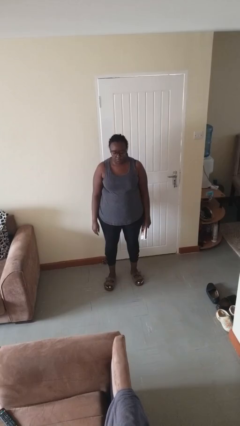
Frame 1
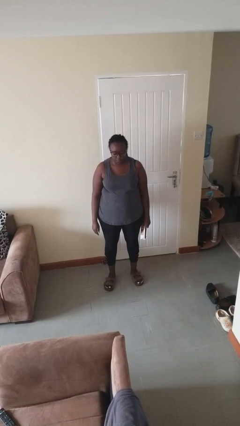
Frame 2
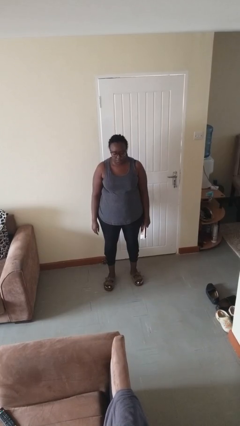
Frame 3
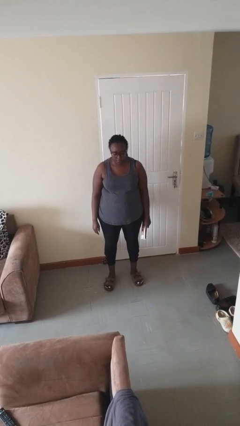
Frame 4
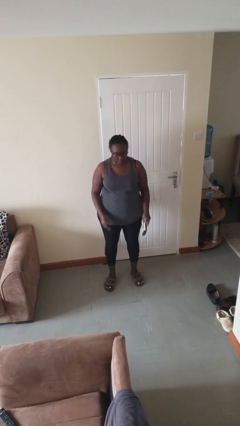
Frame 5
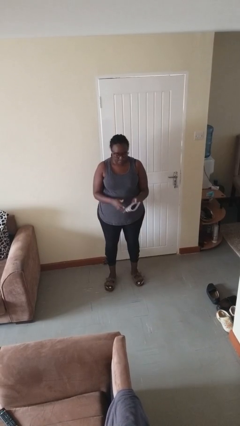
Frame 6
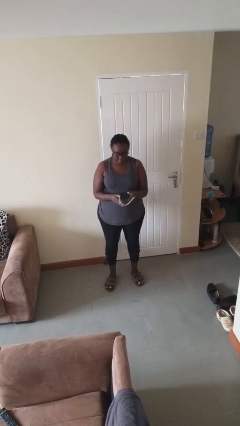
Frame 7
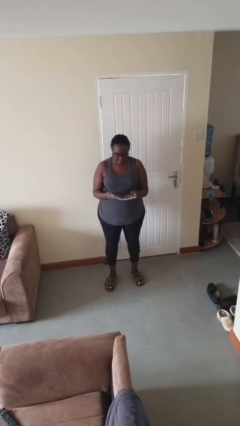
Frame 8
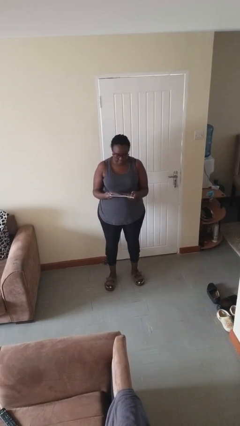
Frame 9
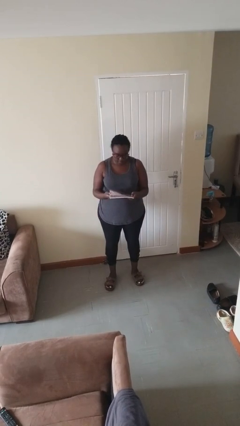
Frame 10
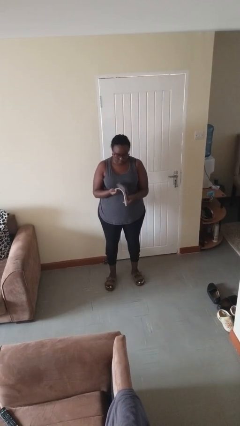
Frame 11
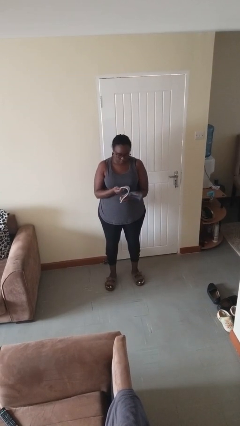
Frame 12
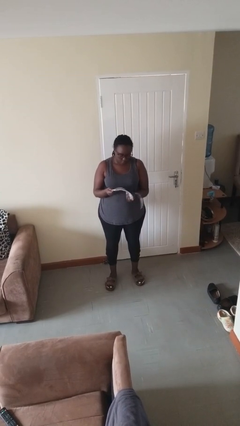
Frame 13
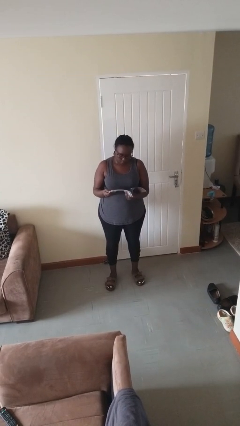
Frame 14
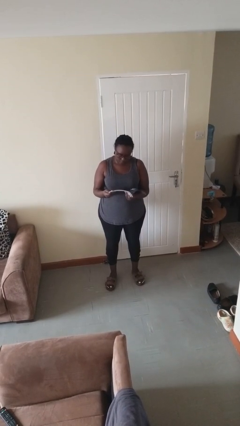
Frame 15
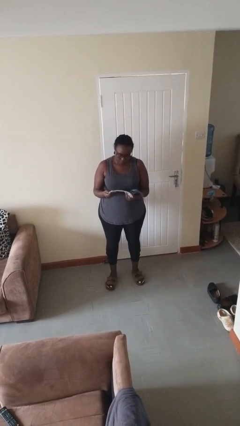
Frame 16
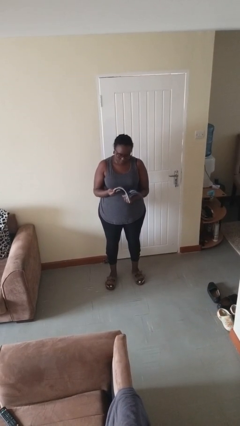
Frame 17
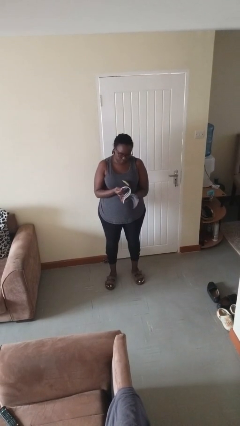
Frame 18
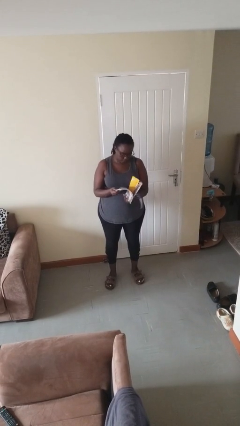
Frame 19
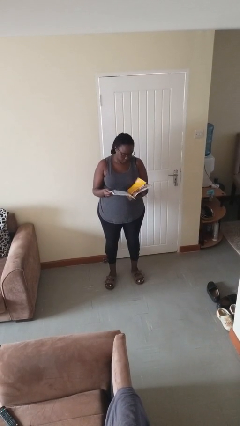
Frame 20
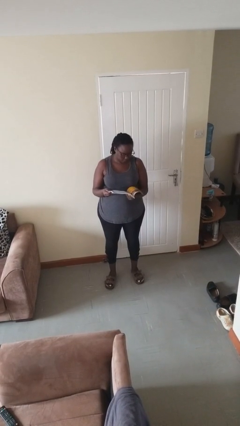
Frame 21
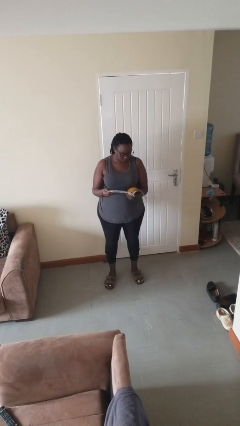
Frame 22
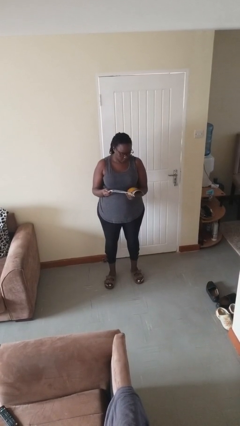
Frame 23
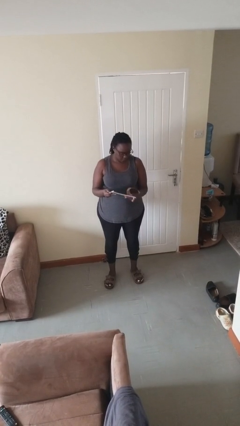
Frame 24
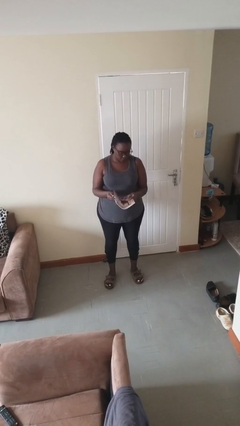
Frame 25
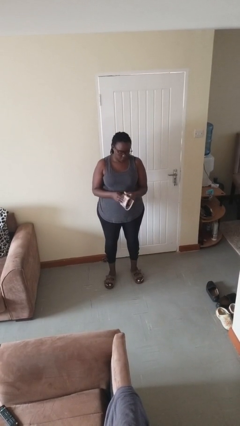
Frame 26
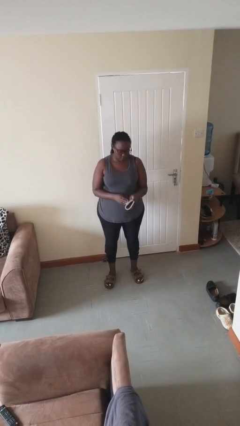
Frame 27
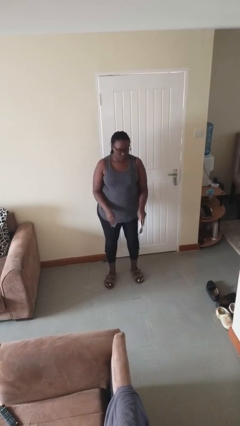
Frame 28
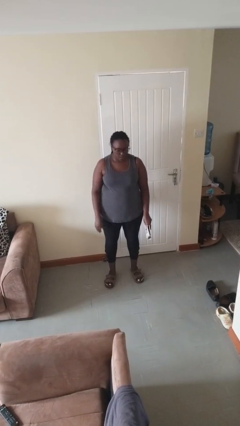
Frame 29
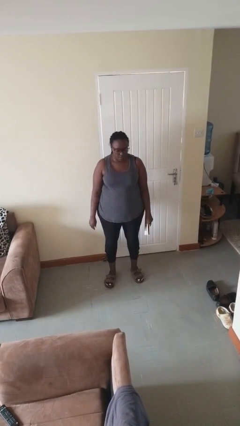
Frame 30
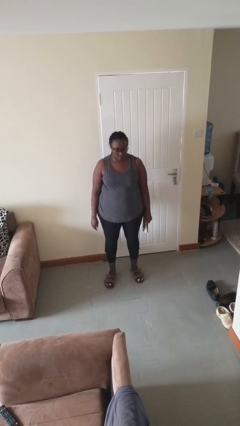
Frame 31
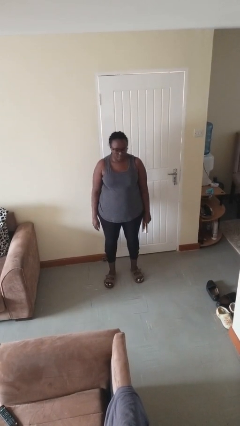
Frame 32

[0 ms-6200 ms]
person reads magazine

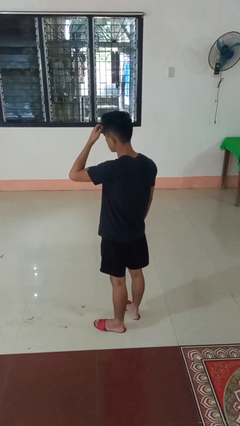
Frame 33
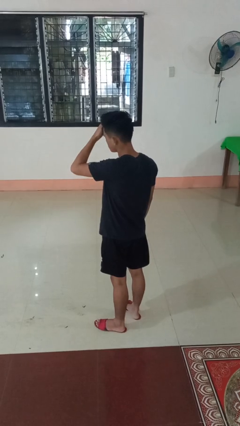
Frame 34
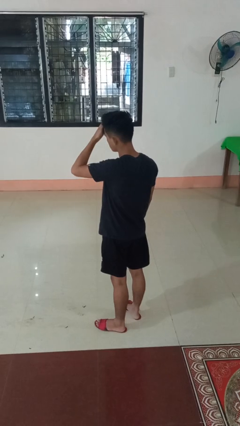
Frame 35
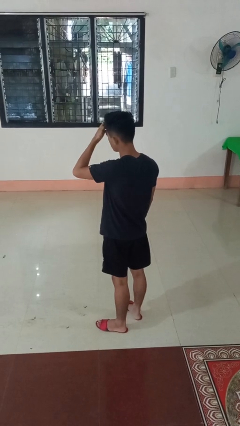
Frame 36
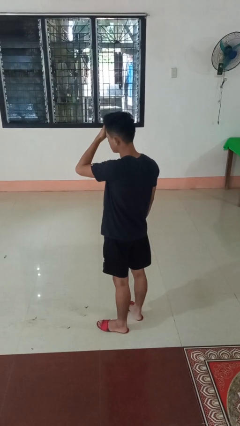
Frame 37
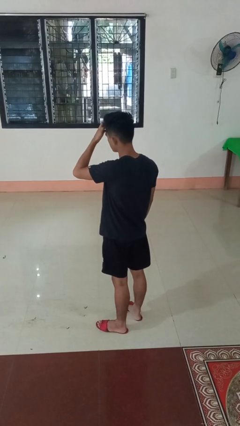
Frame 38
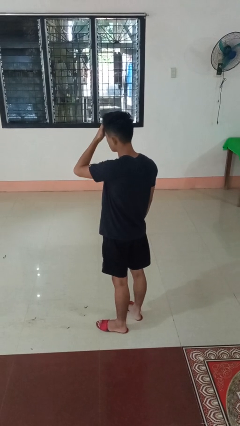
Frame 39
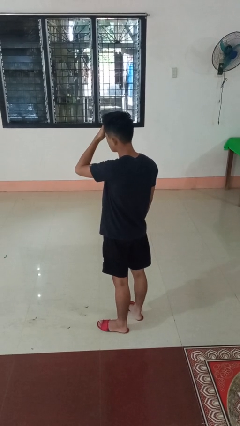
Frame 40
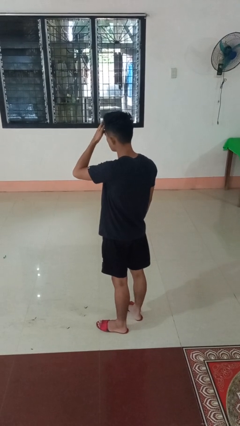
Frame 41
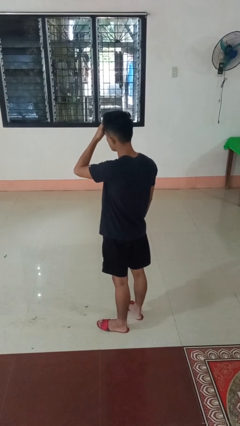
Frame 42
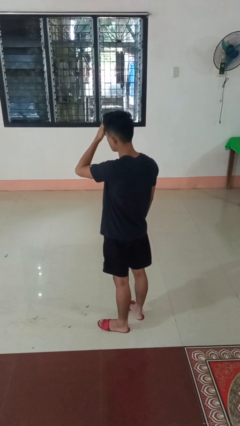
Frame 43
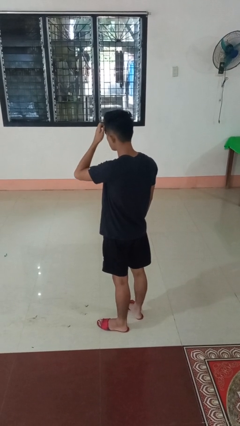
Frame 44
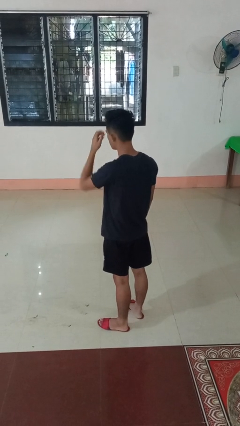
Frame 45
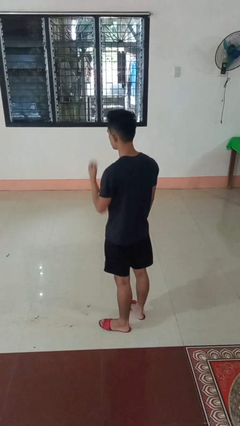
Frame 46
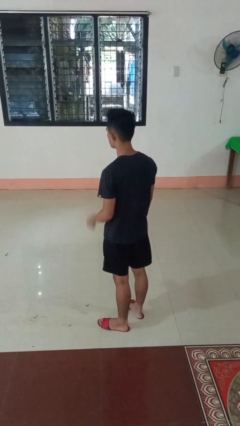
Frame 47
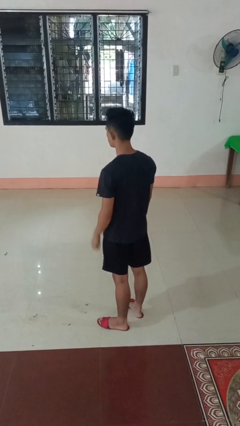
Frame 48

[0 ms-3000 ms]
person scratches face

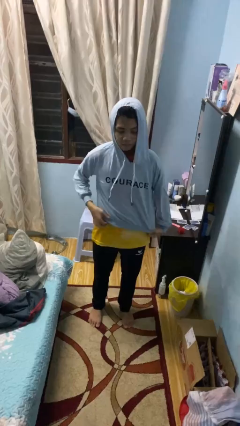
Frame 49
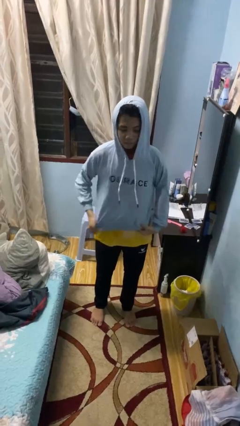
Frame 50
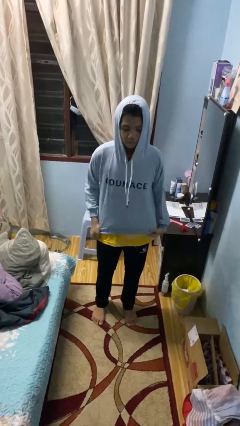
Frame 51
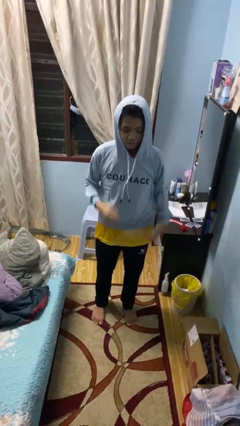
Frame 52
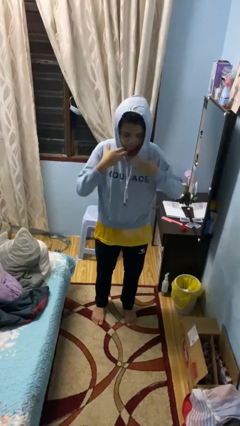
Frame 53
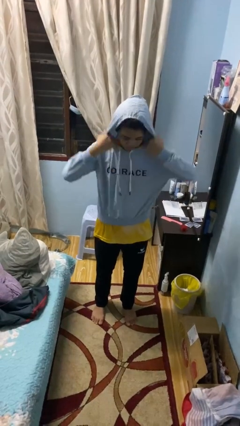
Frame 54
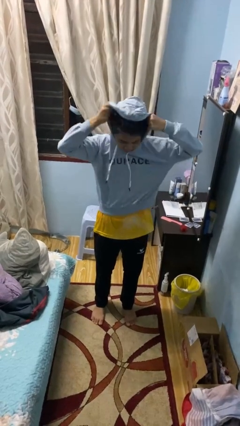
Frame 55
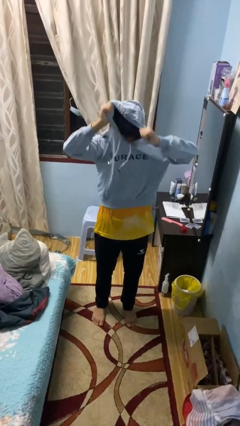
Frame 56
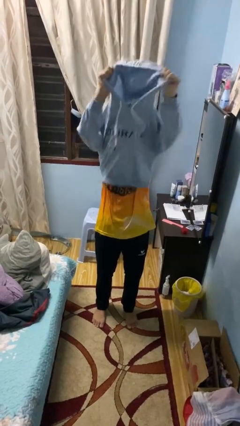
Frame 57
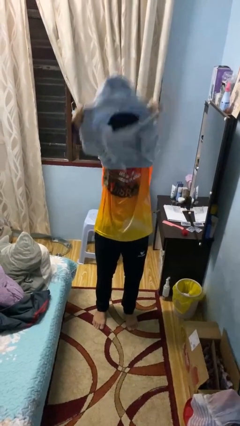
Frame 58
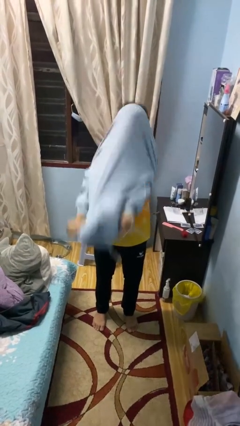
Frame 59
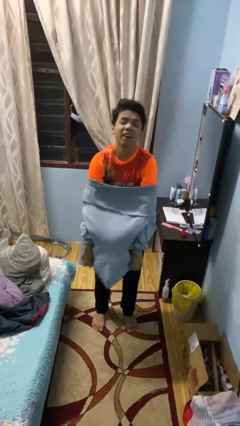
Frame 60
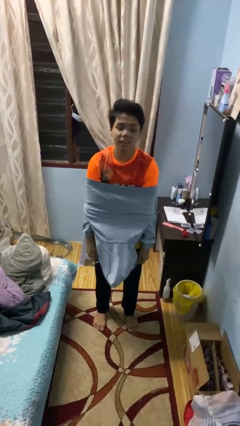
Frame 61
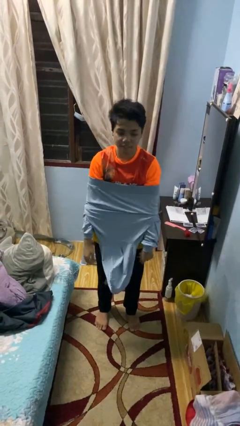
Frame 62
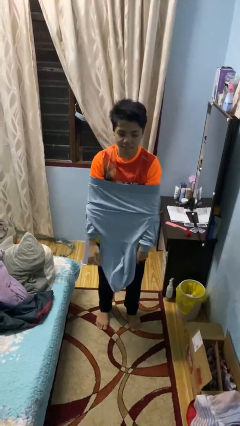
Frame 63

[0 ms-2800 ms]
person takes off hoodie

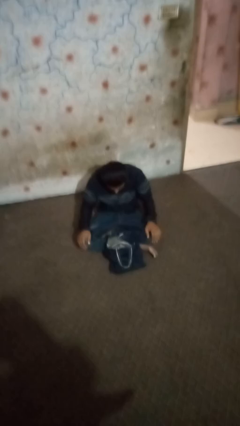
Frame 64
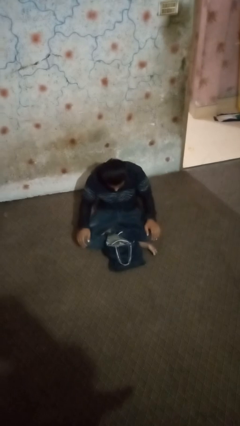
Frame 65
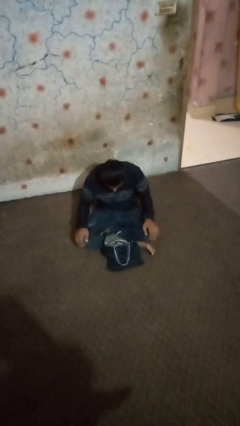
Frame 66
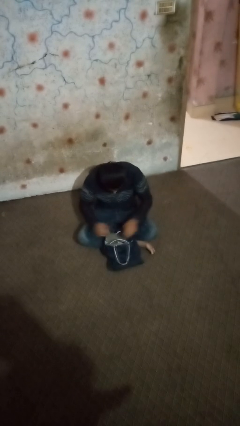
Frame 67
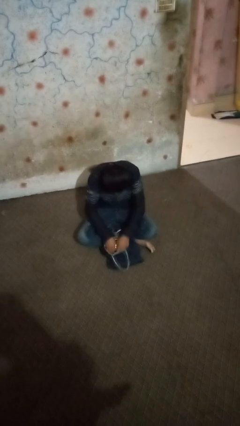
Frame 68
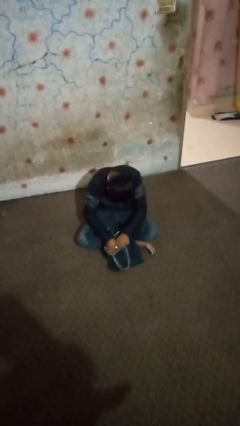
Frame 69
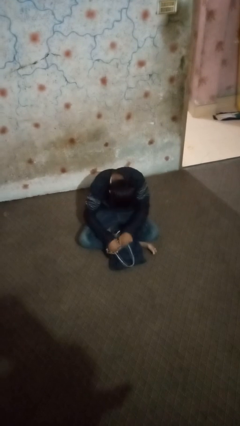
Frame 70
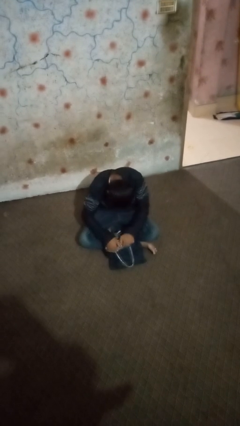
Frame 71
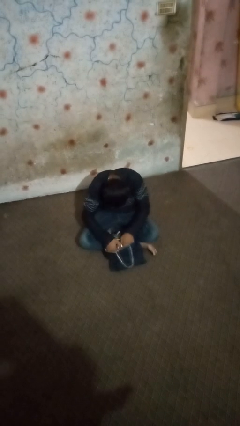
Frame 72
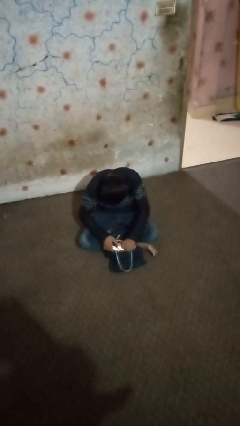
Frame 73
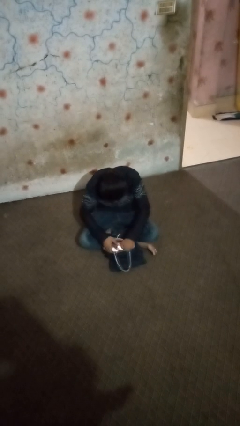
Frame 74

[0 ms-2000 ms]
person searches in bag

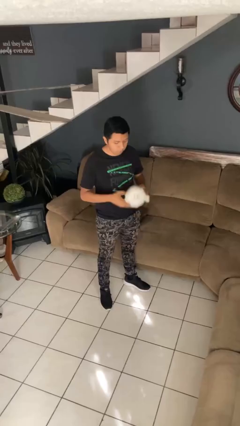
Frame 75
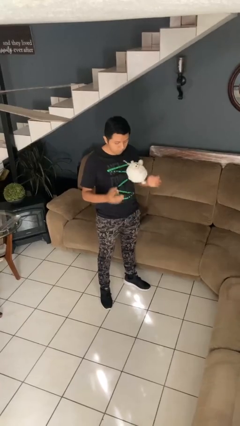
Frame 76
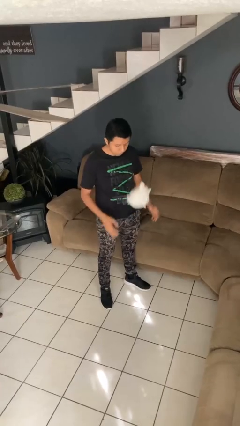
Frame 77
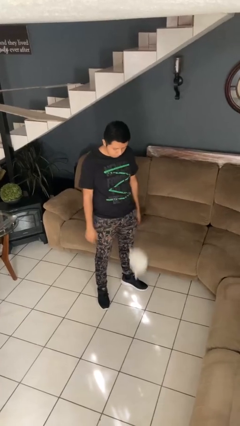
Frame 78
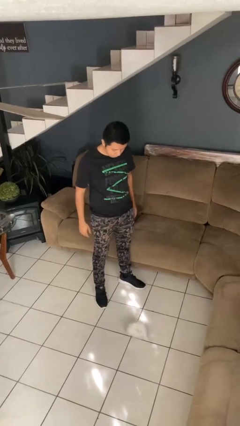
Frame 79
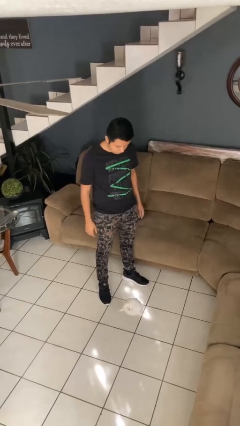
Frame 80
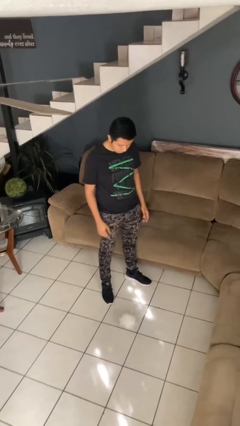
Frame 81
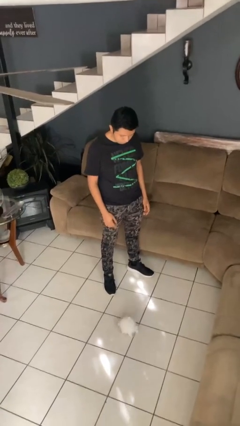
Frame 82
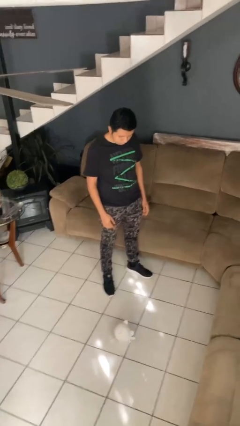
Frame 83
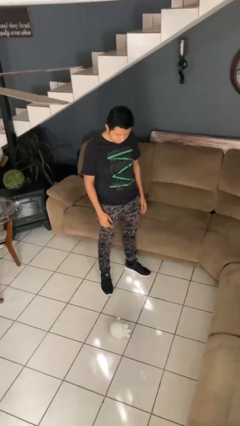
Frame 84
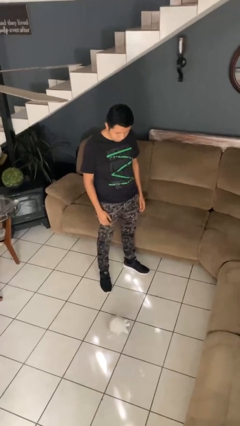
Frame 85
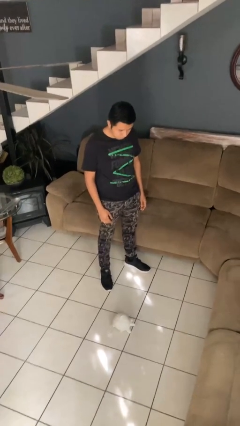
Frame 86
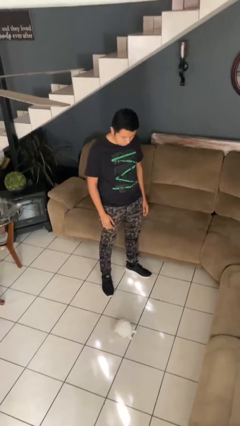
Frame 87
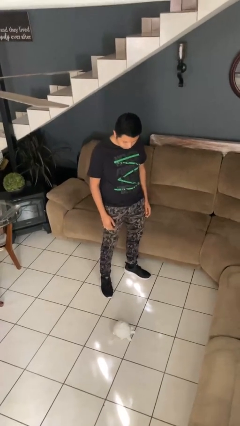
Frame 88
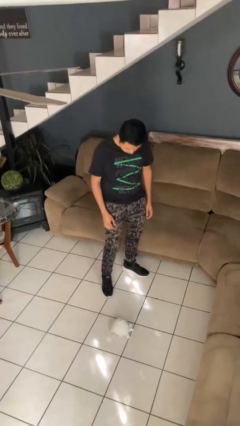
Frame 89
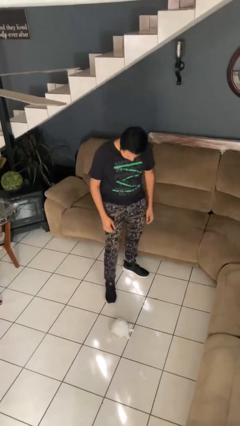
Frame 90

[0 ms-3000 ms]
person throws object into air

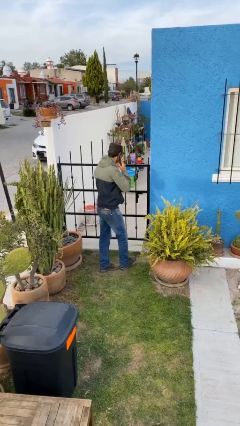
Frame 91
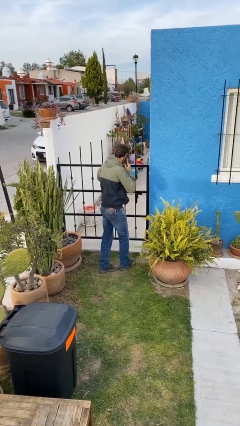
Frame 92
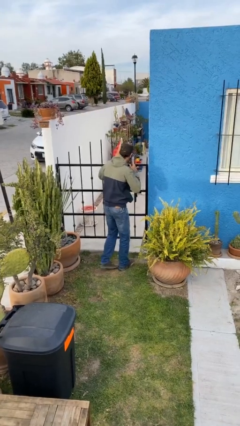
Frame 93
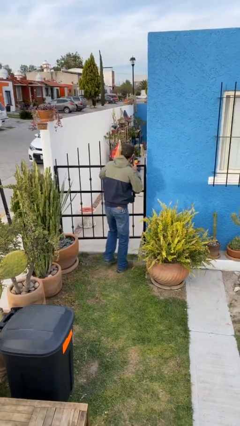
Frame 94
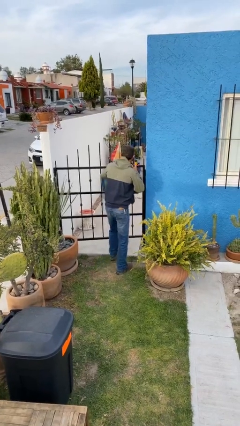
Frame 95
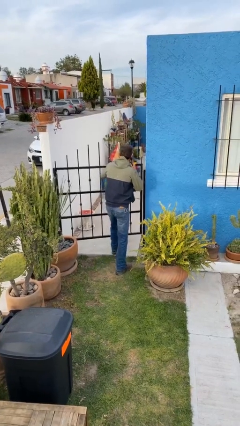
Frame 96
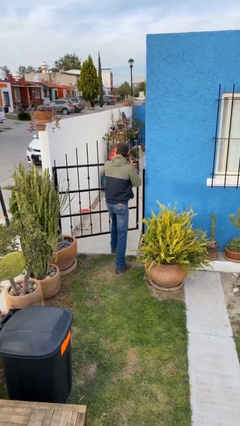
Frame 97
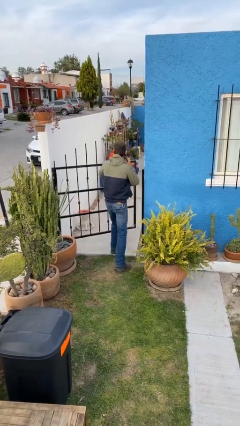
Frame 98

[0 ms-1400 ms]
person opens facility door
